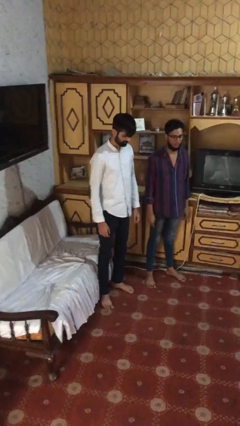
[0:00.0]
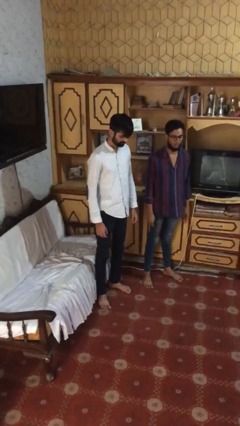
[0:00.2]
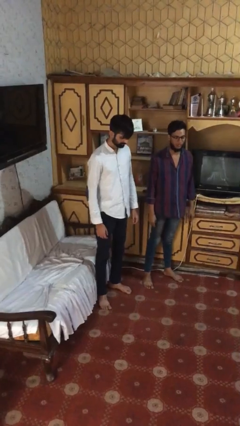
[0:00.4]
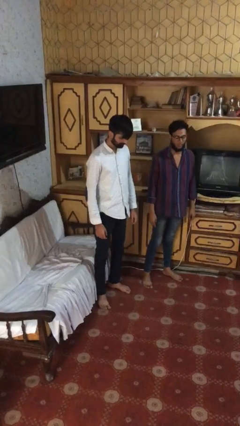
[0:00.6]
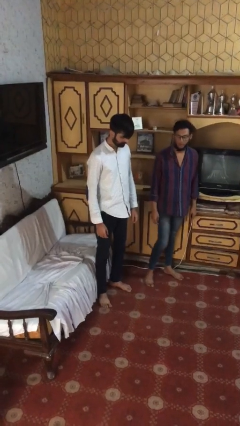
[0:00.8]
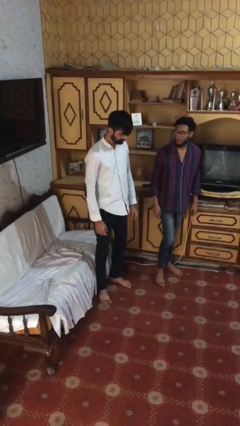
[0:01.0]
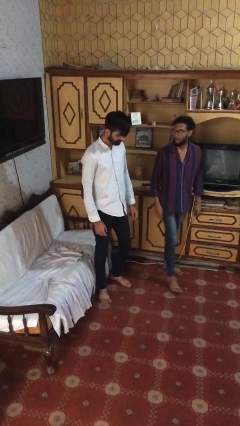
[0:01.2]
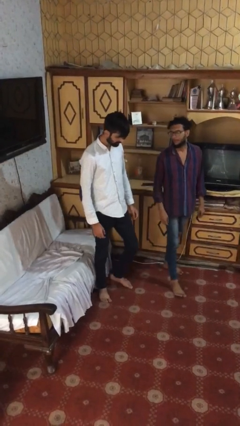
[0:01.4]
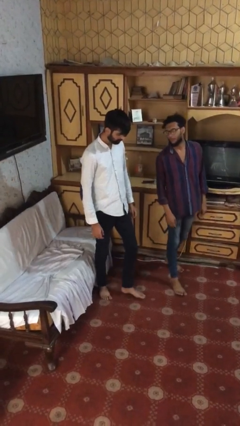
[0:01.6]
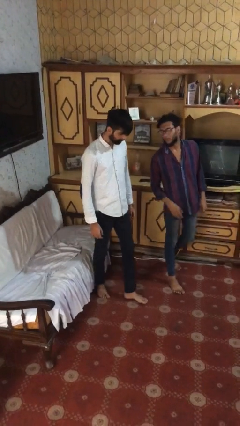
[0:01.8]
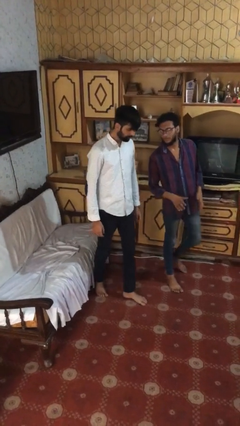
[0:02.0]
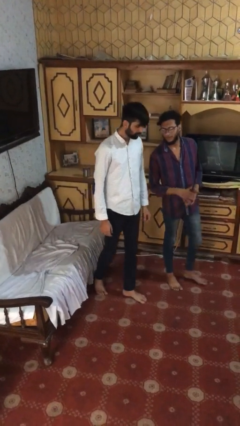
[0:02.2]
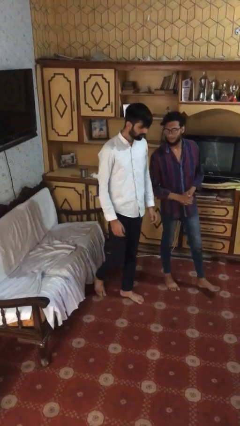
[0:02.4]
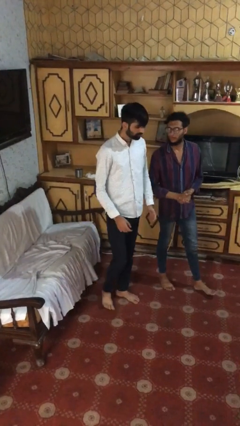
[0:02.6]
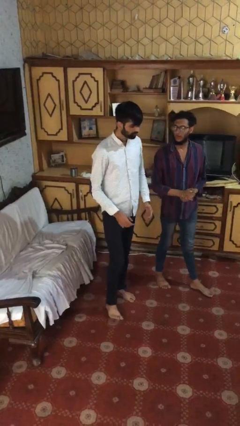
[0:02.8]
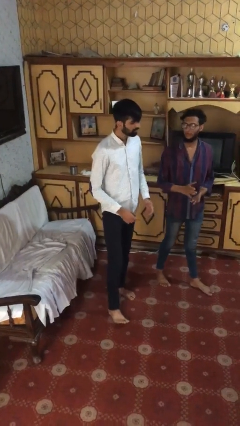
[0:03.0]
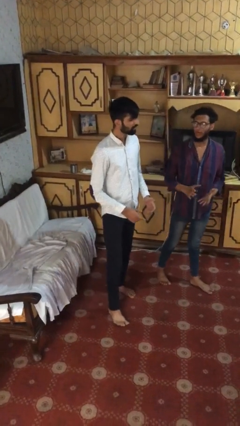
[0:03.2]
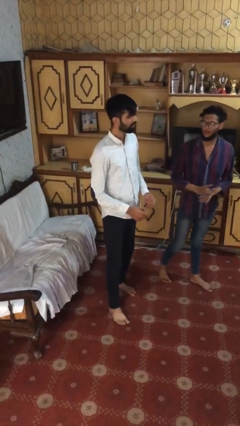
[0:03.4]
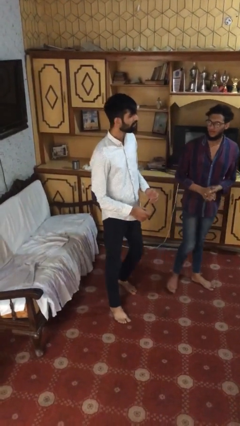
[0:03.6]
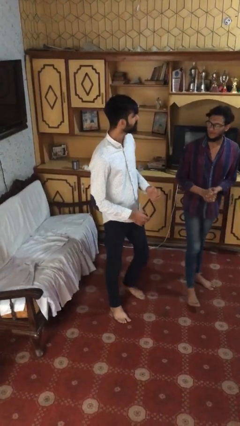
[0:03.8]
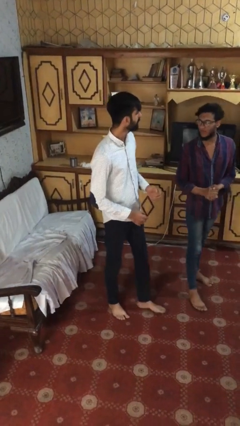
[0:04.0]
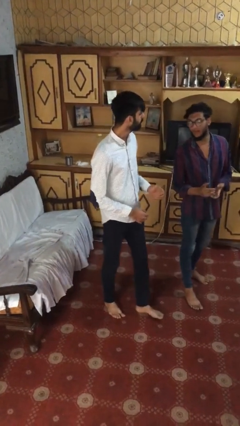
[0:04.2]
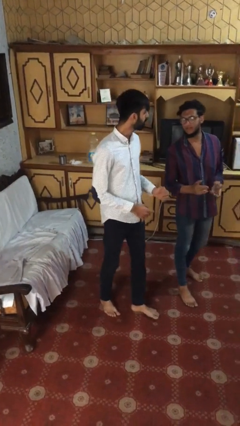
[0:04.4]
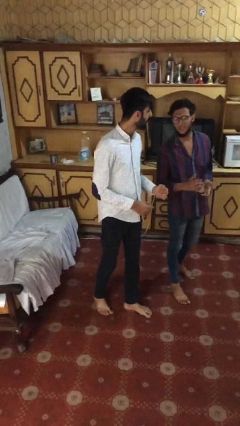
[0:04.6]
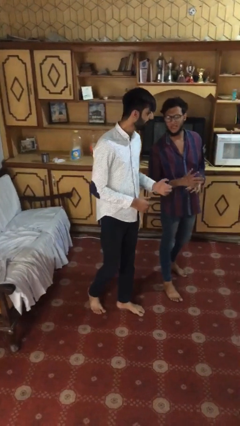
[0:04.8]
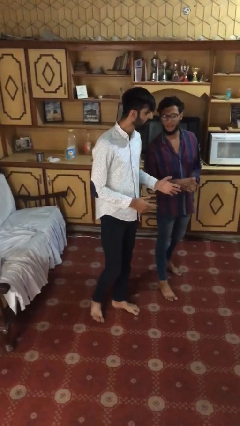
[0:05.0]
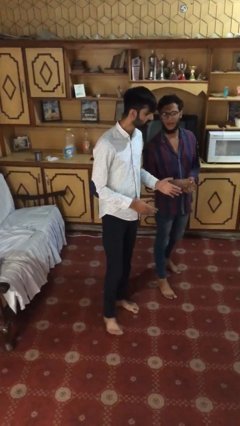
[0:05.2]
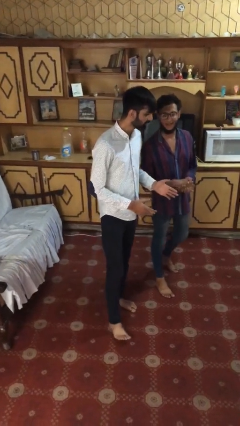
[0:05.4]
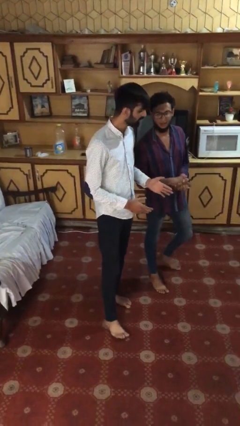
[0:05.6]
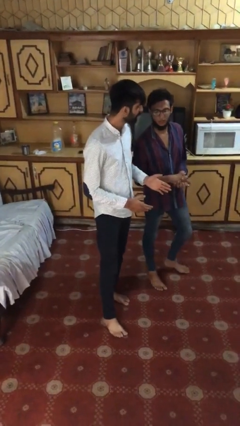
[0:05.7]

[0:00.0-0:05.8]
person talks to person

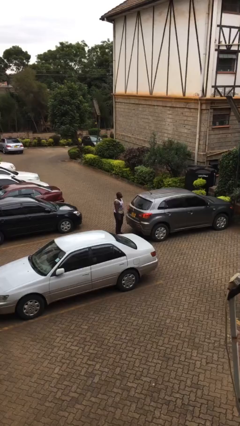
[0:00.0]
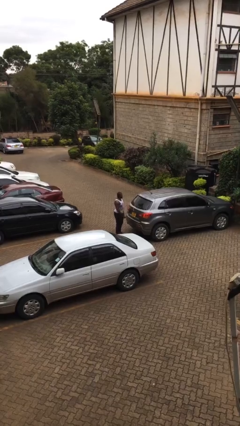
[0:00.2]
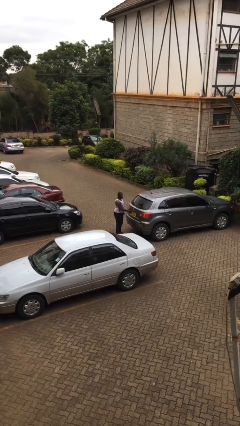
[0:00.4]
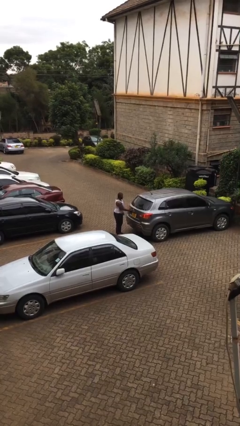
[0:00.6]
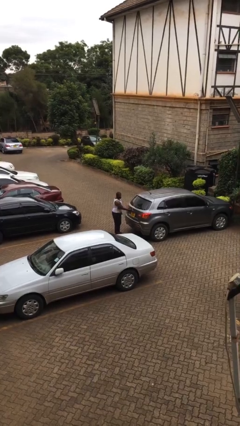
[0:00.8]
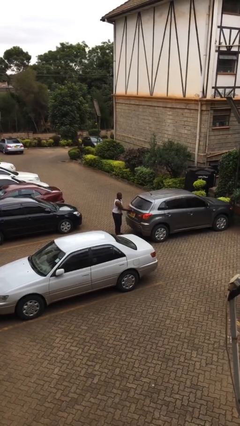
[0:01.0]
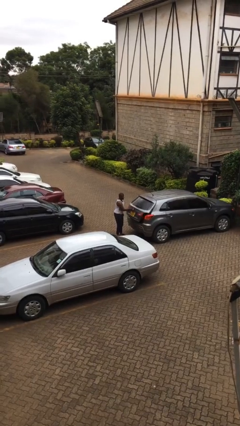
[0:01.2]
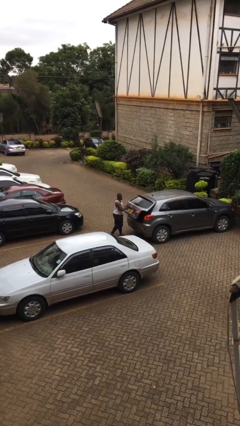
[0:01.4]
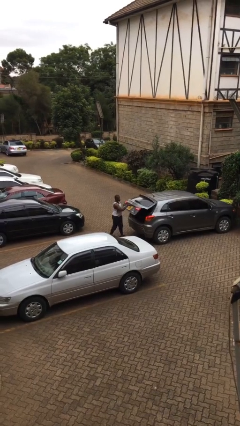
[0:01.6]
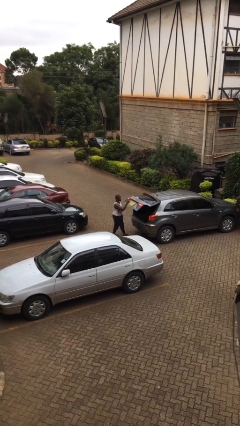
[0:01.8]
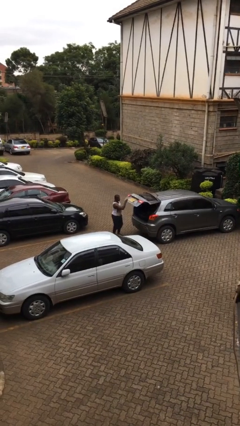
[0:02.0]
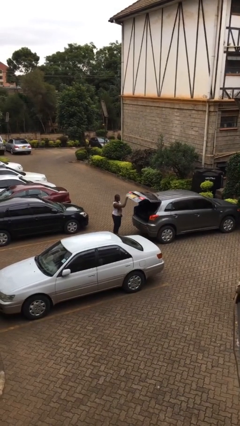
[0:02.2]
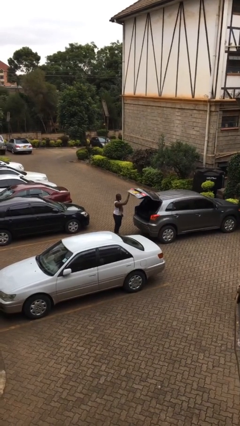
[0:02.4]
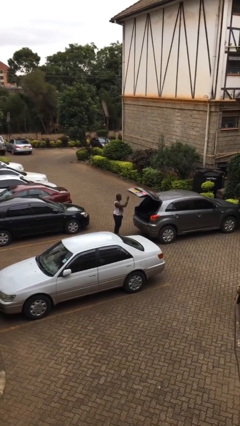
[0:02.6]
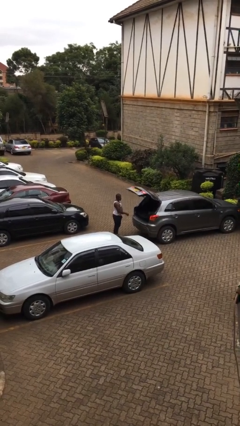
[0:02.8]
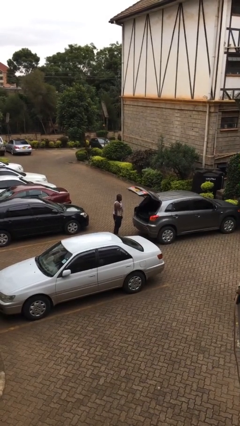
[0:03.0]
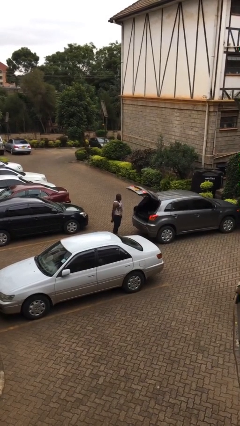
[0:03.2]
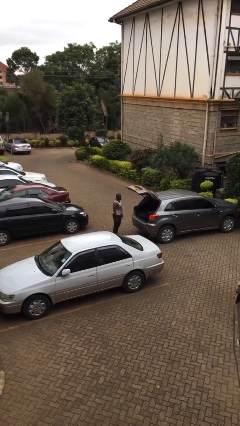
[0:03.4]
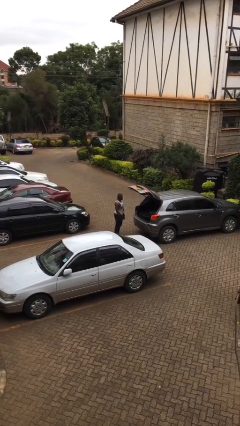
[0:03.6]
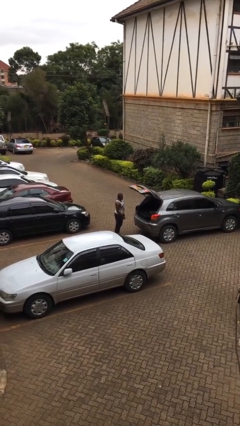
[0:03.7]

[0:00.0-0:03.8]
person opens car trunk

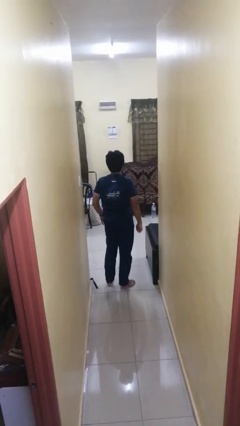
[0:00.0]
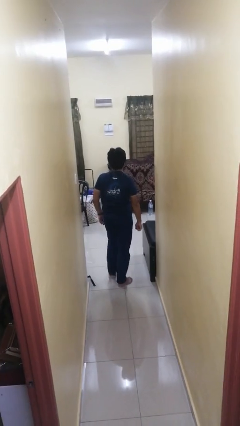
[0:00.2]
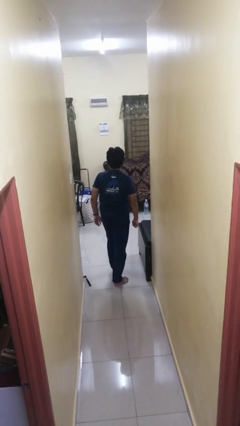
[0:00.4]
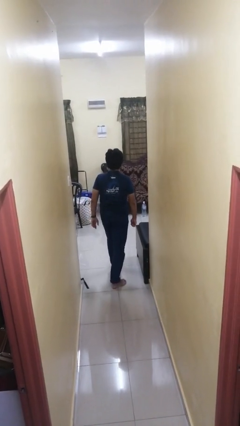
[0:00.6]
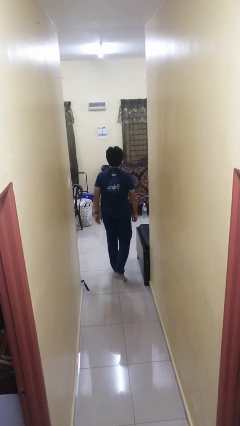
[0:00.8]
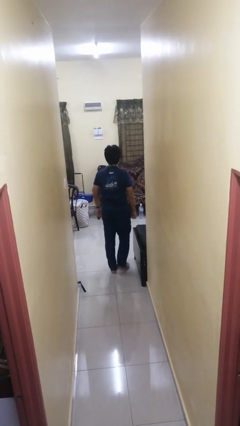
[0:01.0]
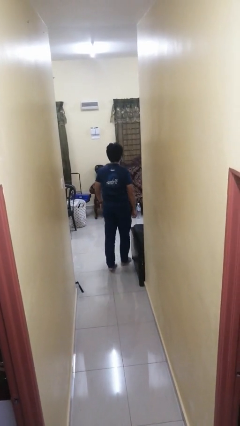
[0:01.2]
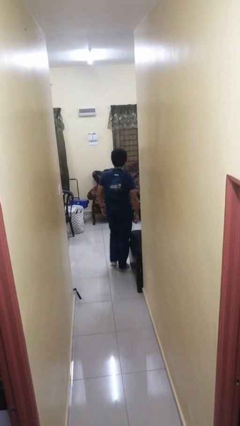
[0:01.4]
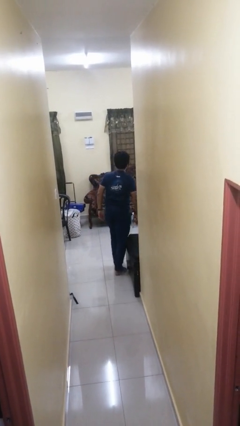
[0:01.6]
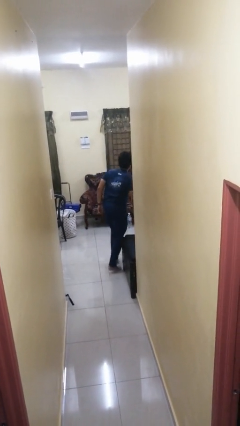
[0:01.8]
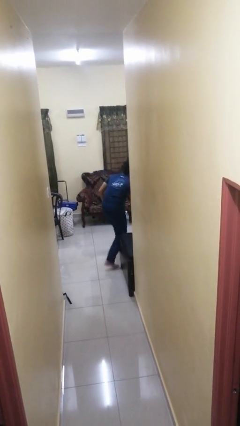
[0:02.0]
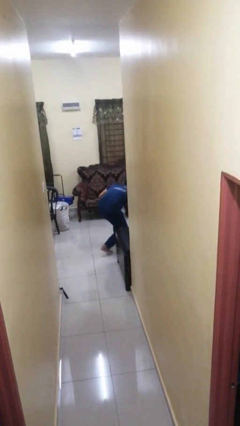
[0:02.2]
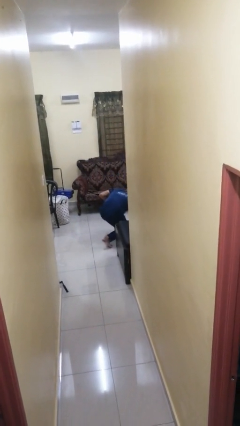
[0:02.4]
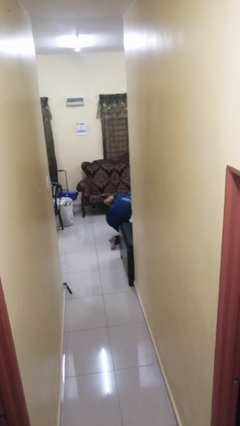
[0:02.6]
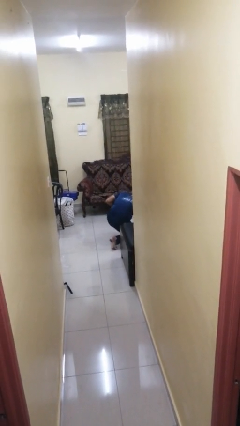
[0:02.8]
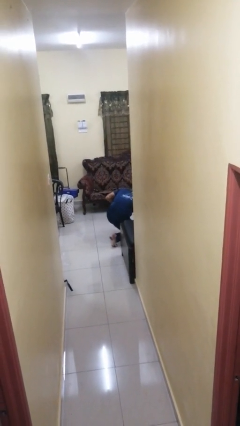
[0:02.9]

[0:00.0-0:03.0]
person trips on object on floor

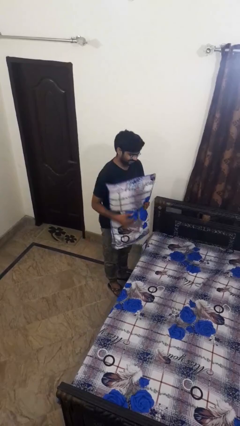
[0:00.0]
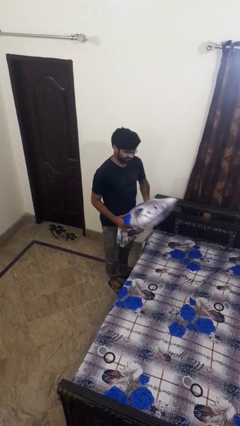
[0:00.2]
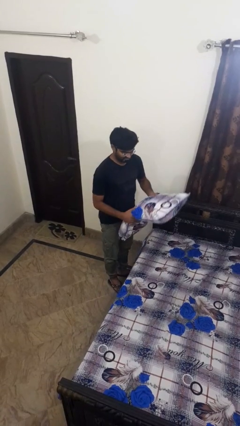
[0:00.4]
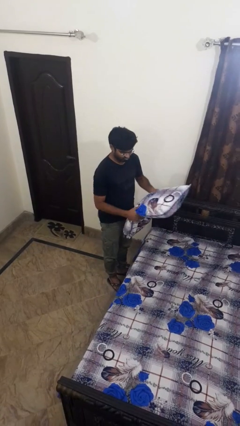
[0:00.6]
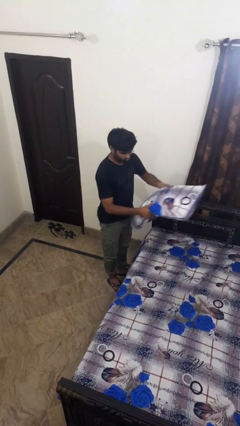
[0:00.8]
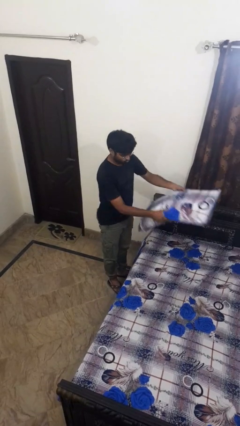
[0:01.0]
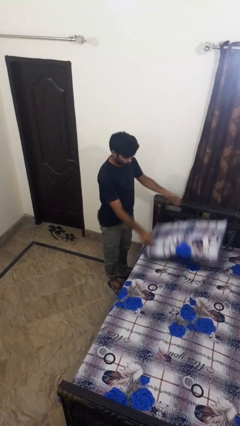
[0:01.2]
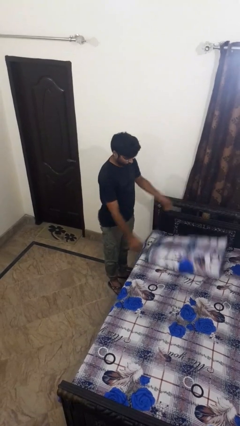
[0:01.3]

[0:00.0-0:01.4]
person puts down object on bed

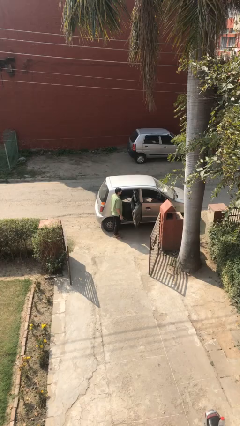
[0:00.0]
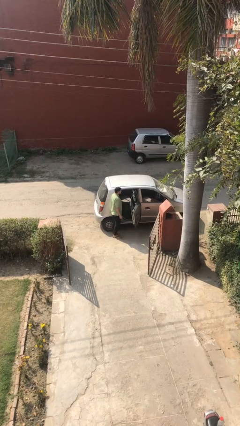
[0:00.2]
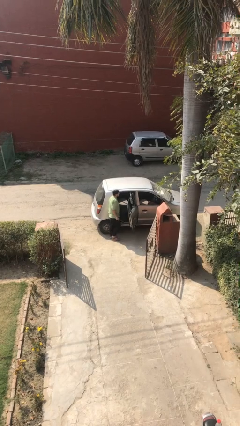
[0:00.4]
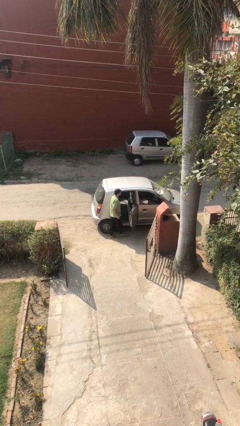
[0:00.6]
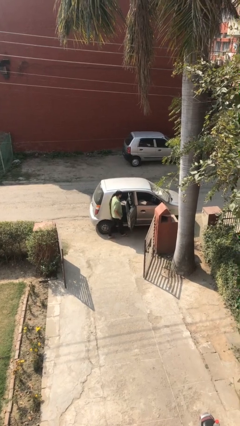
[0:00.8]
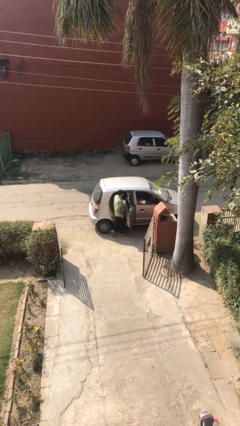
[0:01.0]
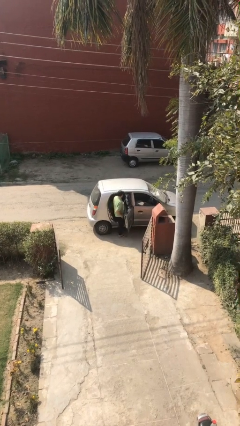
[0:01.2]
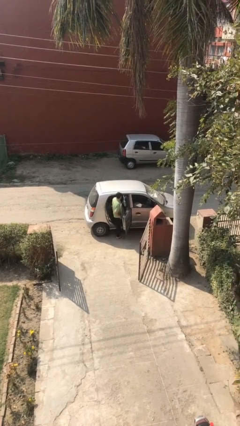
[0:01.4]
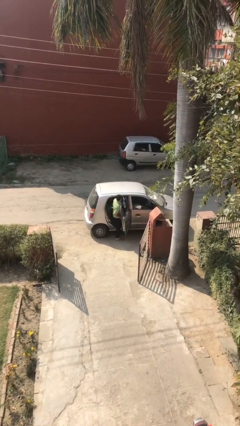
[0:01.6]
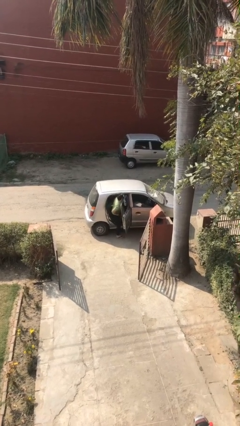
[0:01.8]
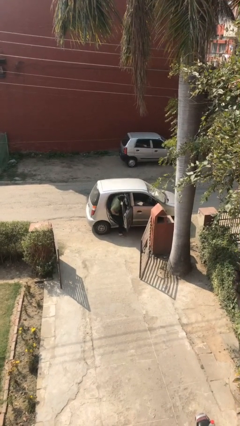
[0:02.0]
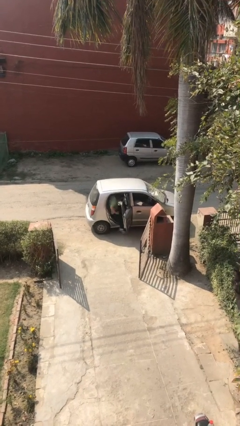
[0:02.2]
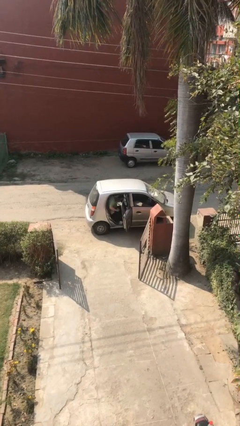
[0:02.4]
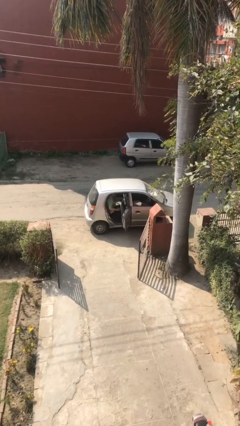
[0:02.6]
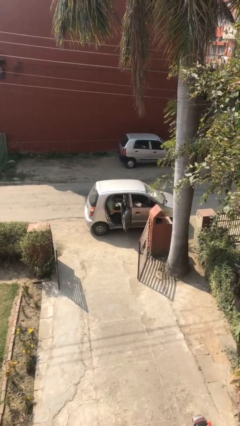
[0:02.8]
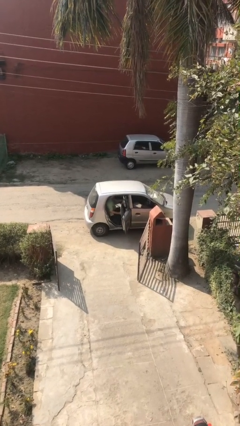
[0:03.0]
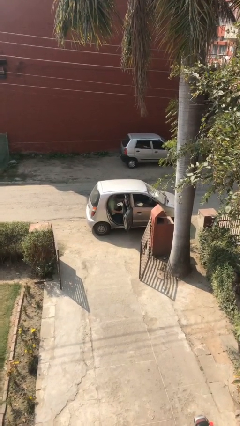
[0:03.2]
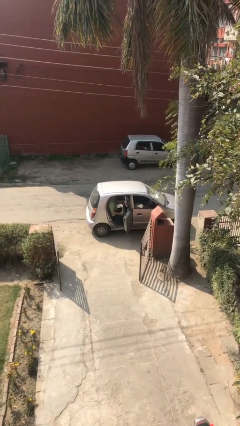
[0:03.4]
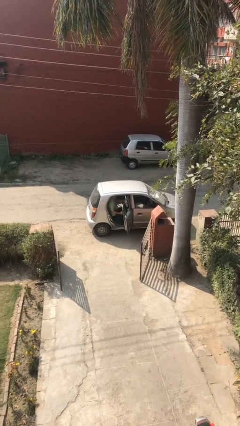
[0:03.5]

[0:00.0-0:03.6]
person enters car

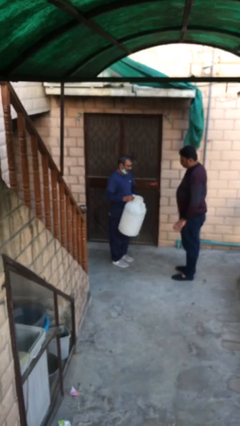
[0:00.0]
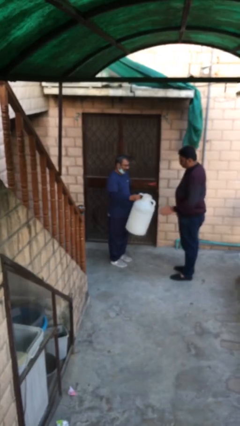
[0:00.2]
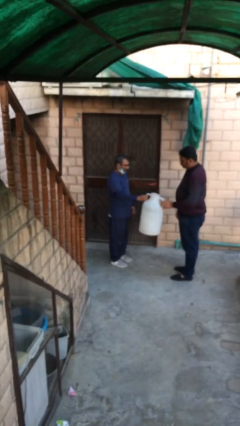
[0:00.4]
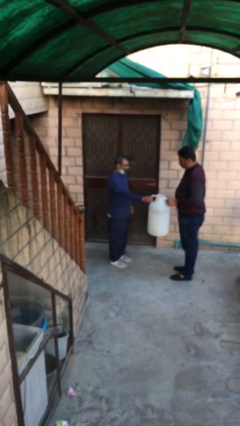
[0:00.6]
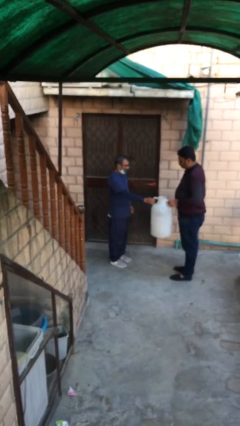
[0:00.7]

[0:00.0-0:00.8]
person transfers object to person
